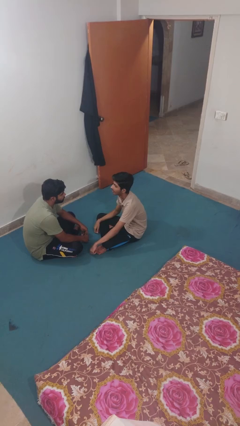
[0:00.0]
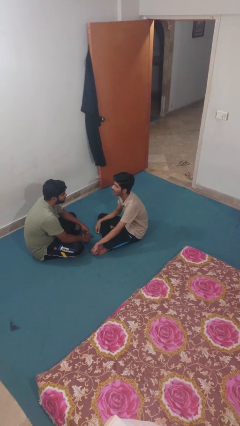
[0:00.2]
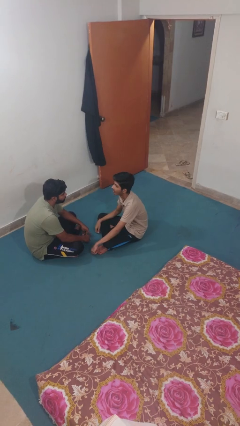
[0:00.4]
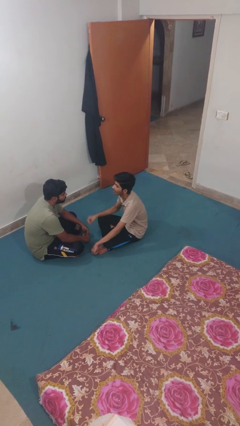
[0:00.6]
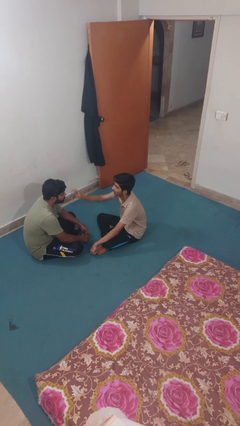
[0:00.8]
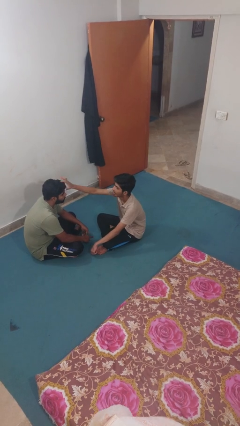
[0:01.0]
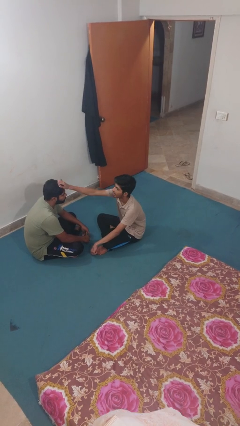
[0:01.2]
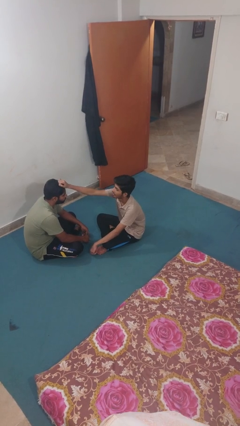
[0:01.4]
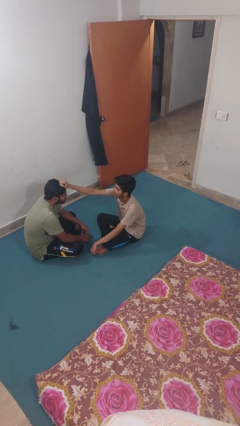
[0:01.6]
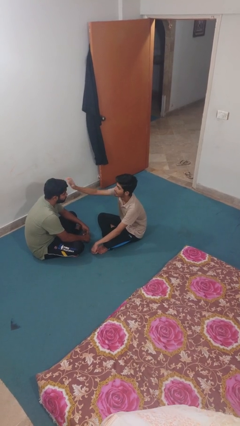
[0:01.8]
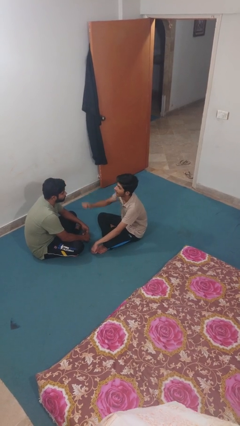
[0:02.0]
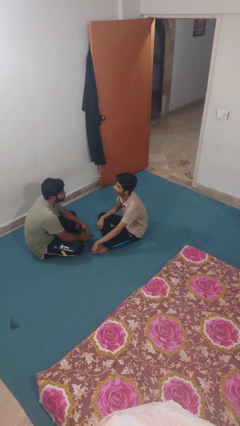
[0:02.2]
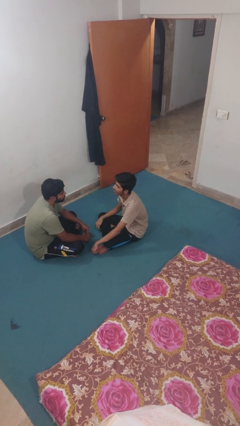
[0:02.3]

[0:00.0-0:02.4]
person grabs person by hair

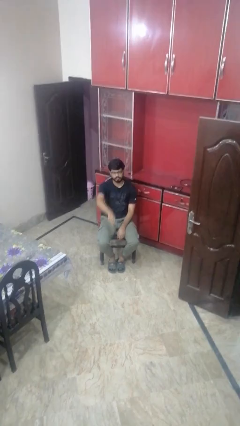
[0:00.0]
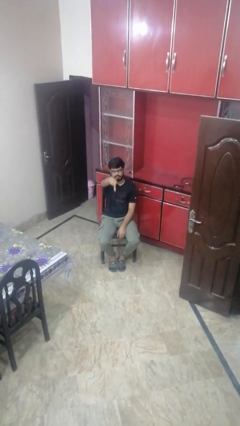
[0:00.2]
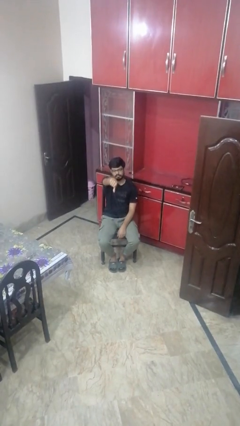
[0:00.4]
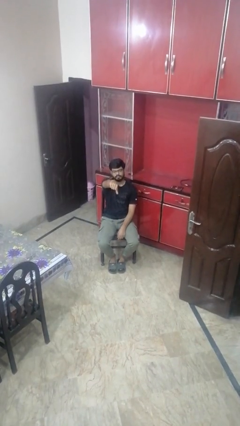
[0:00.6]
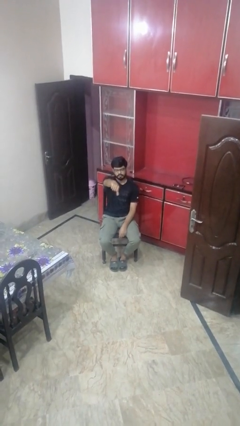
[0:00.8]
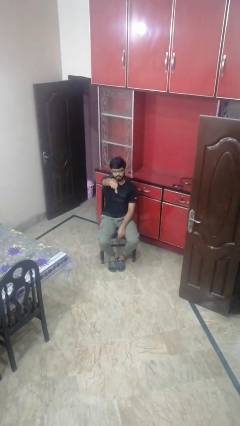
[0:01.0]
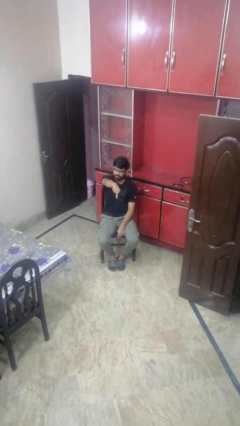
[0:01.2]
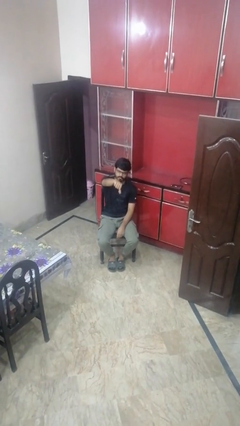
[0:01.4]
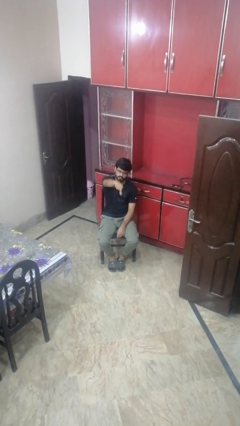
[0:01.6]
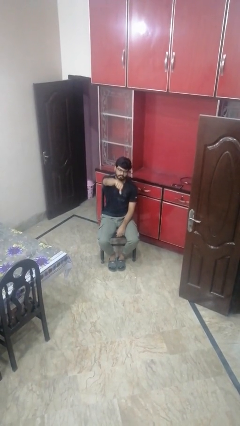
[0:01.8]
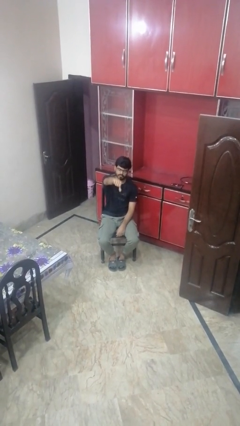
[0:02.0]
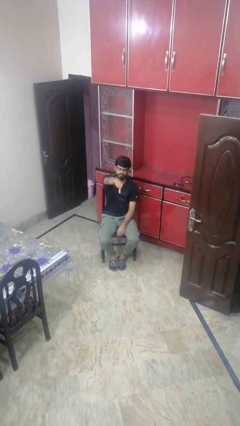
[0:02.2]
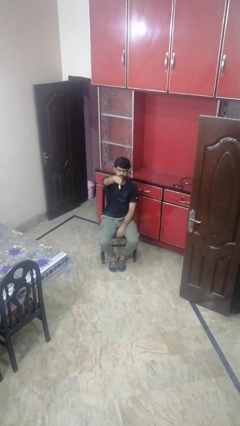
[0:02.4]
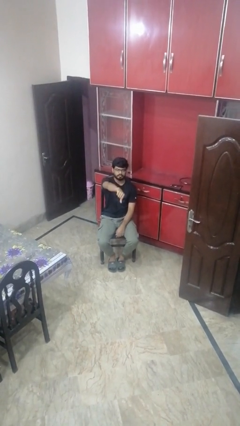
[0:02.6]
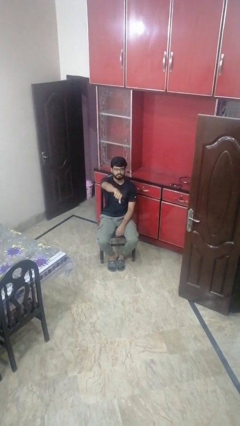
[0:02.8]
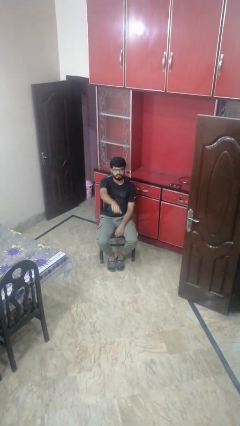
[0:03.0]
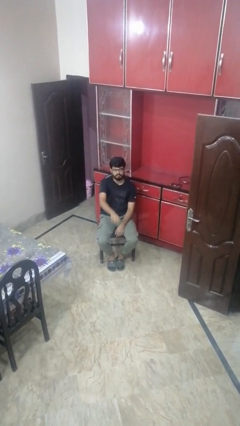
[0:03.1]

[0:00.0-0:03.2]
person gestures thumbs down

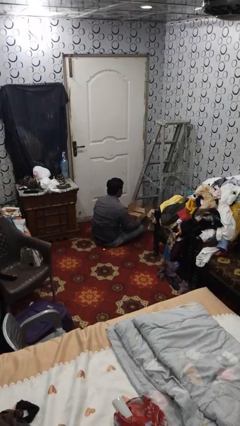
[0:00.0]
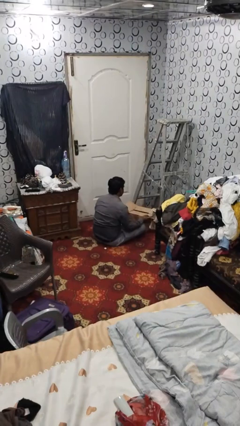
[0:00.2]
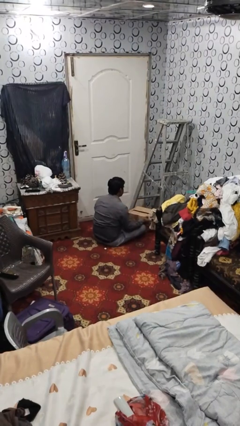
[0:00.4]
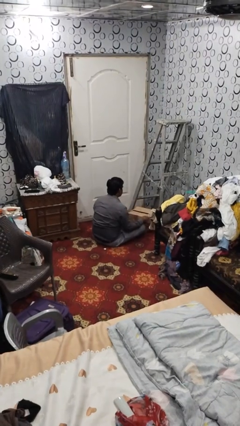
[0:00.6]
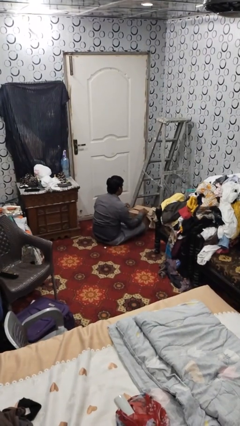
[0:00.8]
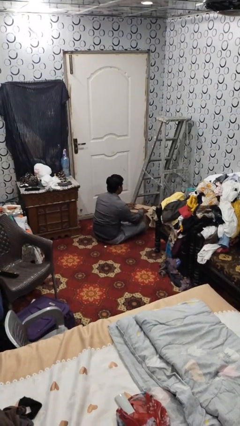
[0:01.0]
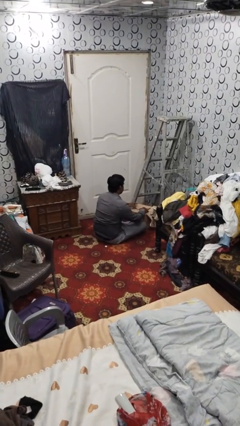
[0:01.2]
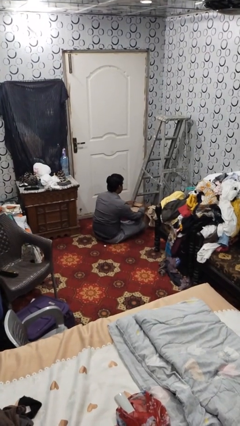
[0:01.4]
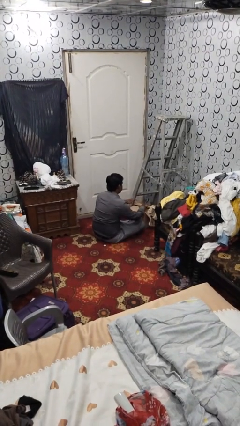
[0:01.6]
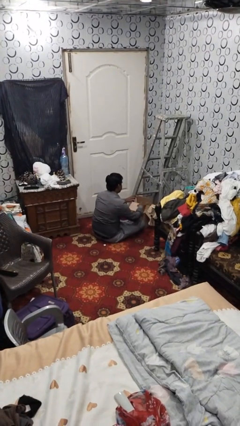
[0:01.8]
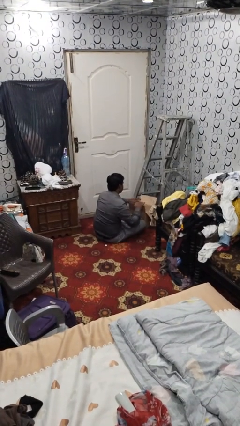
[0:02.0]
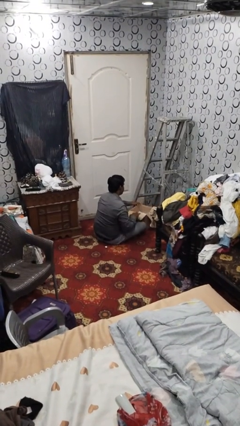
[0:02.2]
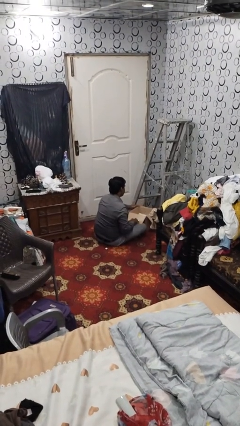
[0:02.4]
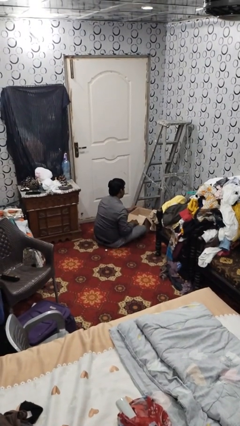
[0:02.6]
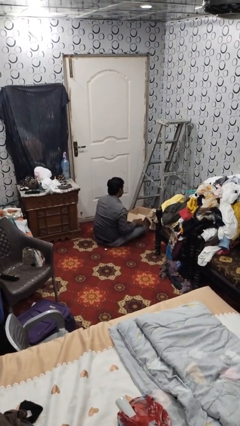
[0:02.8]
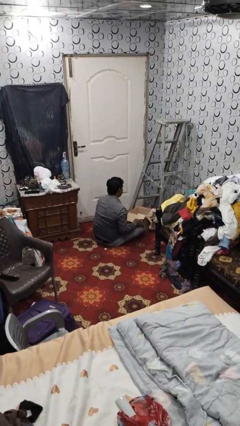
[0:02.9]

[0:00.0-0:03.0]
person opens box

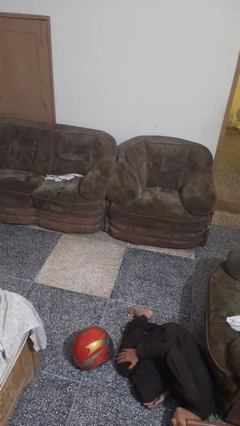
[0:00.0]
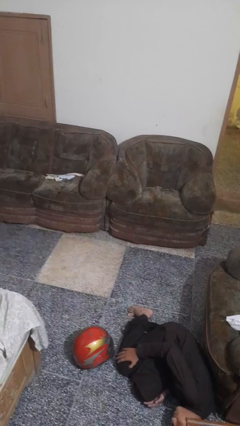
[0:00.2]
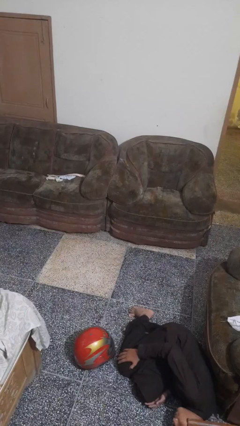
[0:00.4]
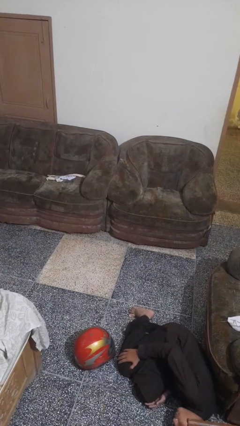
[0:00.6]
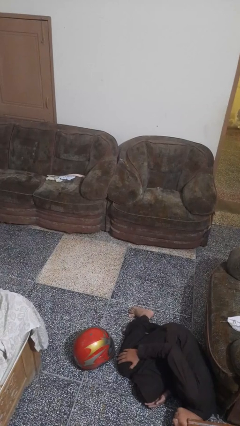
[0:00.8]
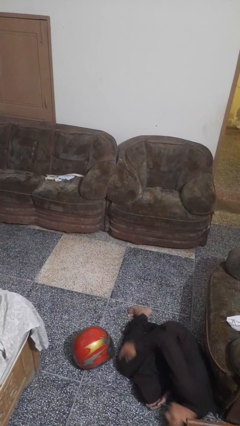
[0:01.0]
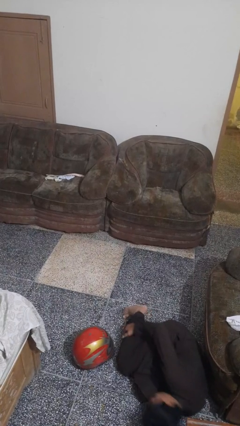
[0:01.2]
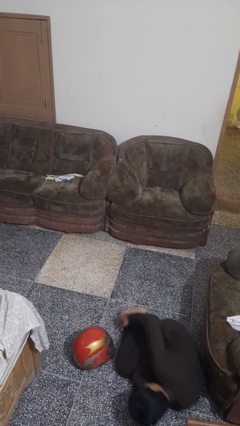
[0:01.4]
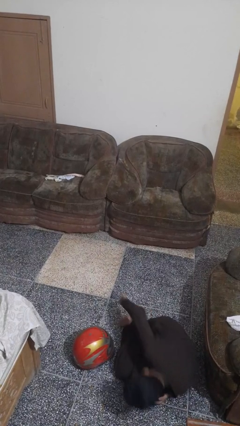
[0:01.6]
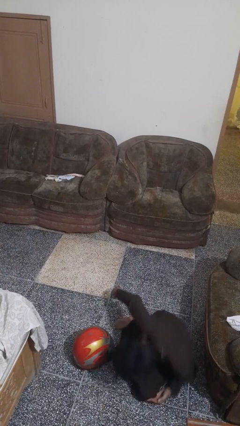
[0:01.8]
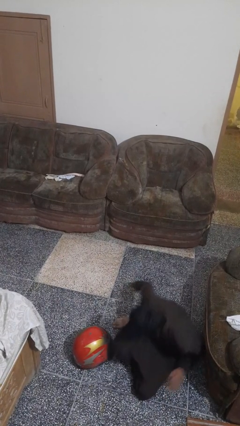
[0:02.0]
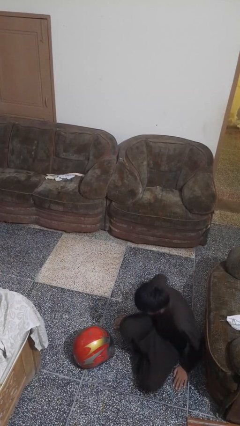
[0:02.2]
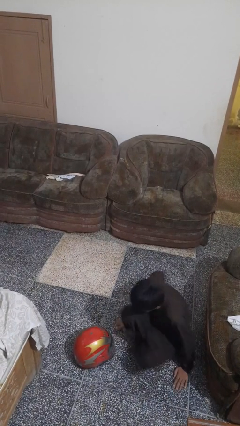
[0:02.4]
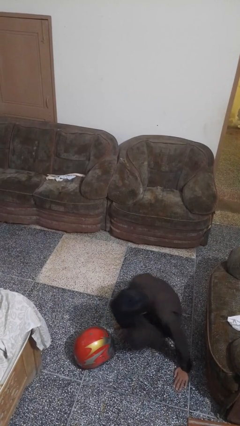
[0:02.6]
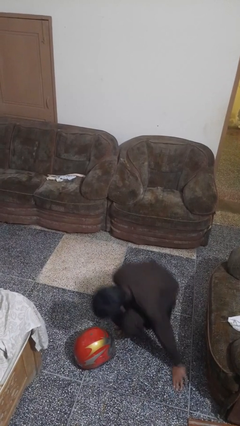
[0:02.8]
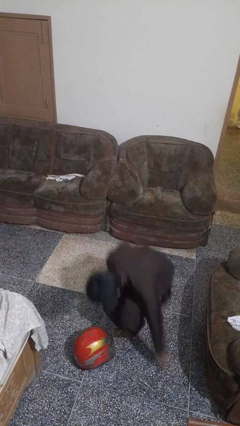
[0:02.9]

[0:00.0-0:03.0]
person stands up from floor

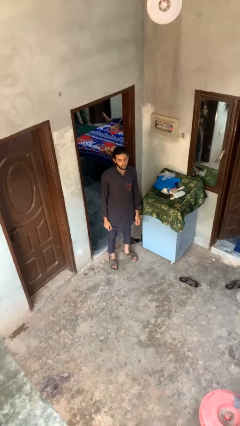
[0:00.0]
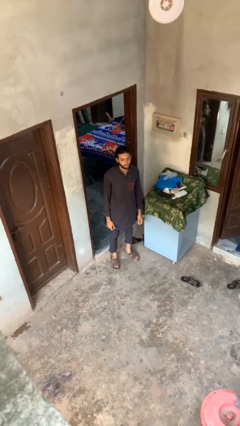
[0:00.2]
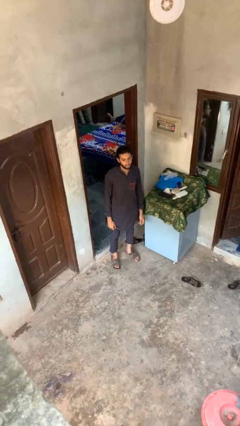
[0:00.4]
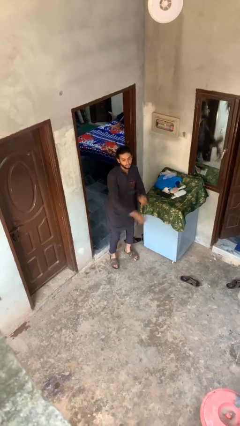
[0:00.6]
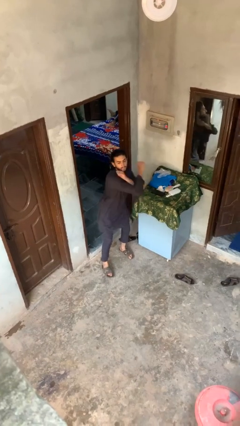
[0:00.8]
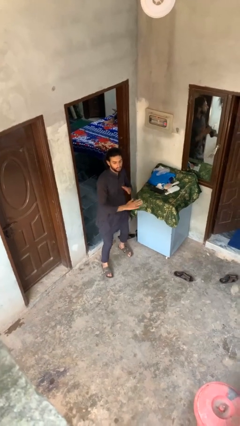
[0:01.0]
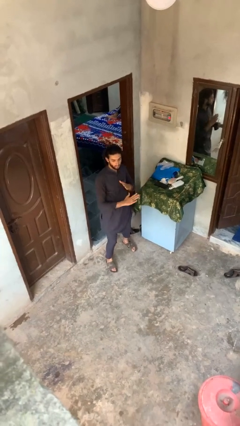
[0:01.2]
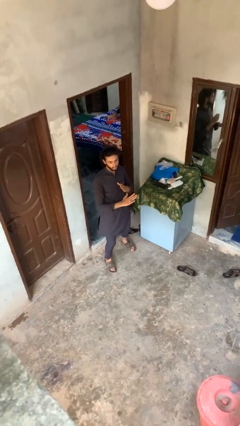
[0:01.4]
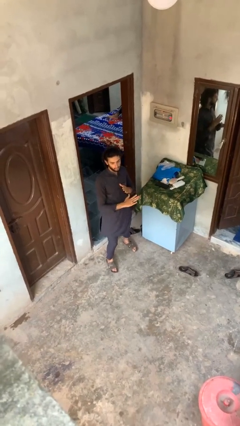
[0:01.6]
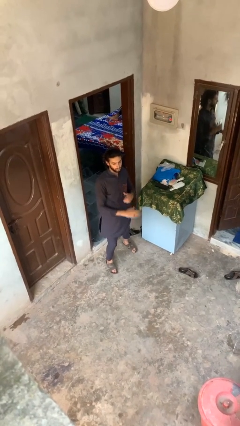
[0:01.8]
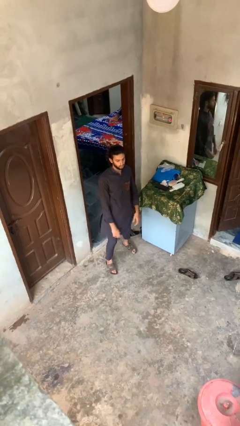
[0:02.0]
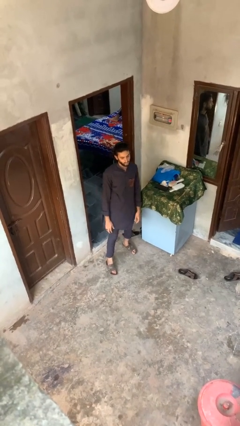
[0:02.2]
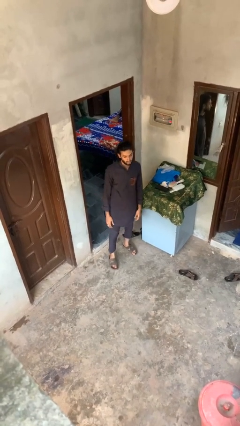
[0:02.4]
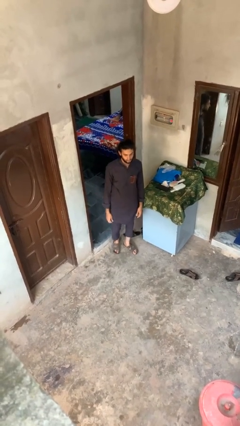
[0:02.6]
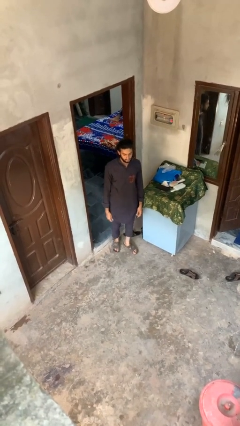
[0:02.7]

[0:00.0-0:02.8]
person karate chop

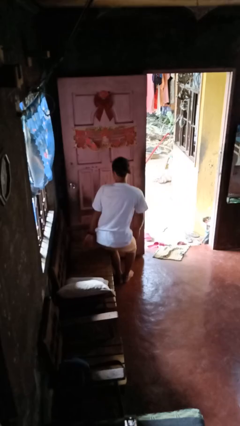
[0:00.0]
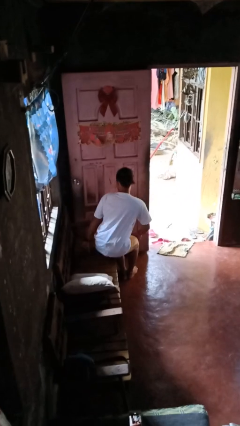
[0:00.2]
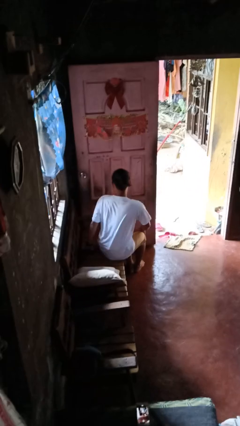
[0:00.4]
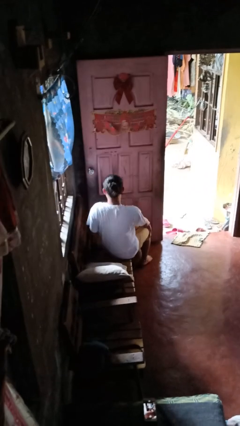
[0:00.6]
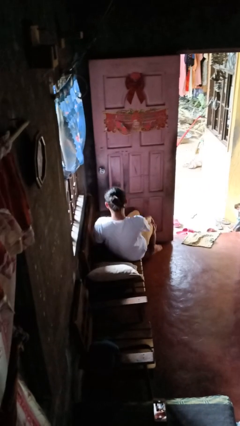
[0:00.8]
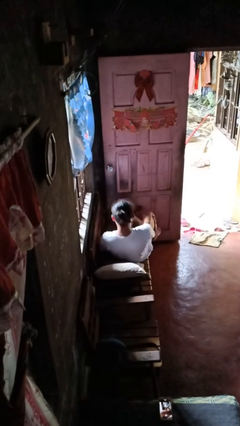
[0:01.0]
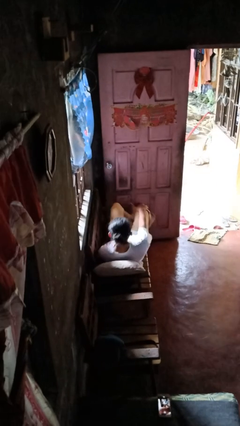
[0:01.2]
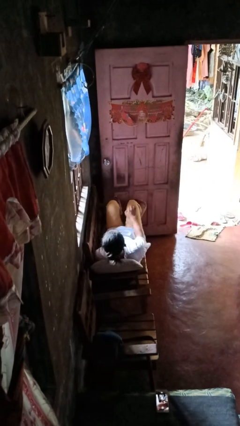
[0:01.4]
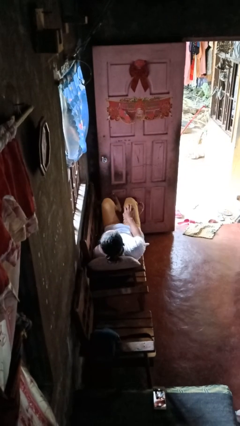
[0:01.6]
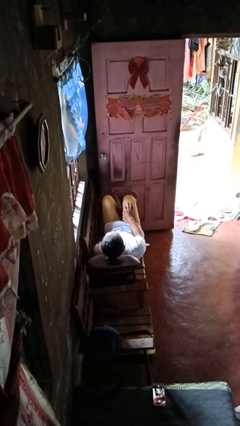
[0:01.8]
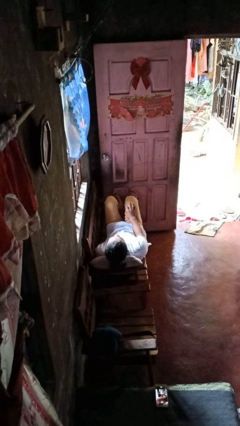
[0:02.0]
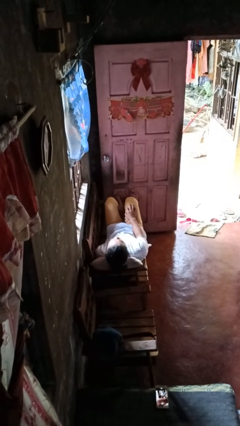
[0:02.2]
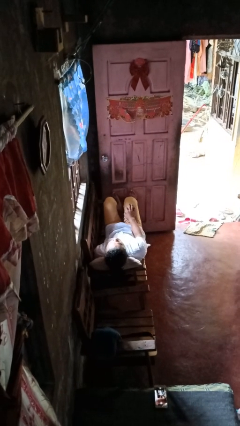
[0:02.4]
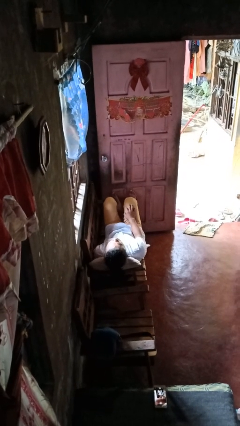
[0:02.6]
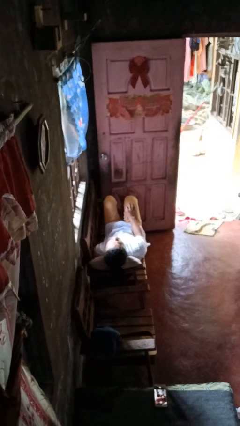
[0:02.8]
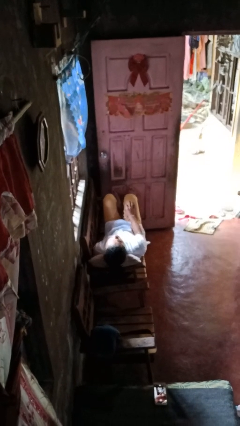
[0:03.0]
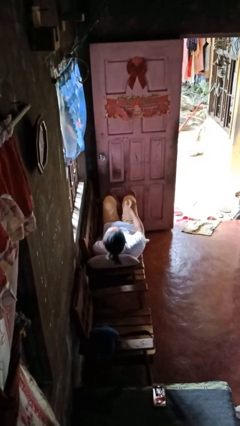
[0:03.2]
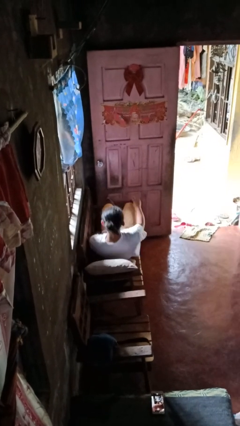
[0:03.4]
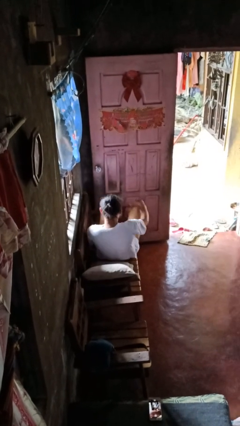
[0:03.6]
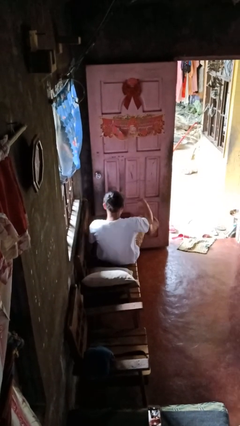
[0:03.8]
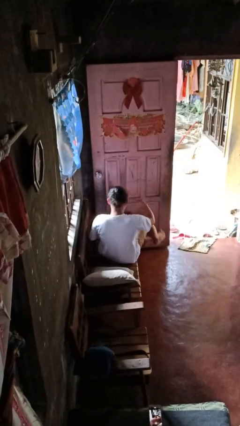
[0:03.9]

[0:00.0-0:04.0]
person lies down on couch
